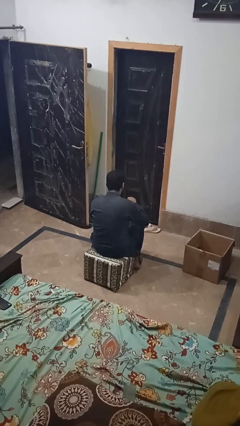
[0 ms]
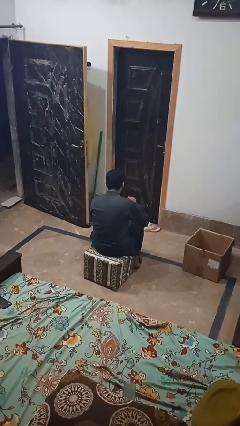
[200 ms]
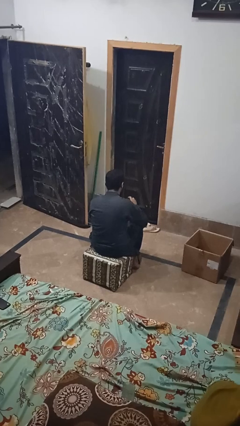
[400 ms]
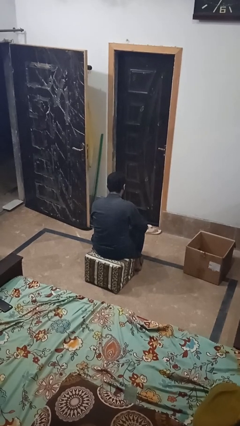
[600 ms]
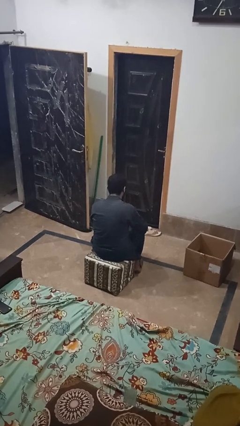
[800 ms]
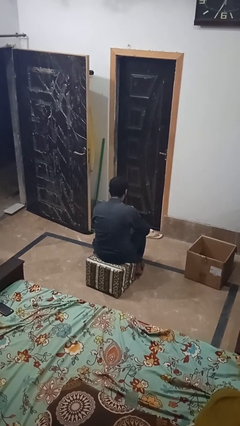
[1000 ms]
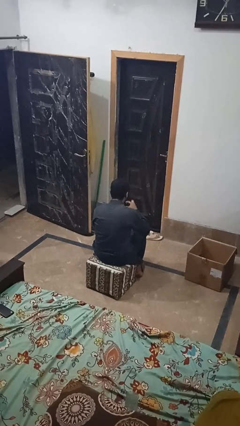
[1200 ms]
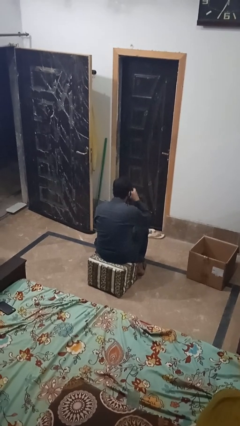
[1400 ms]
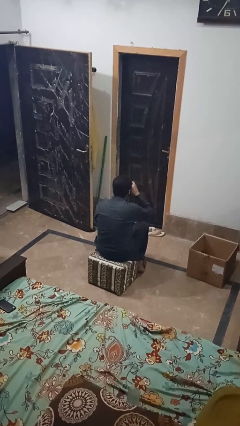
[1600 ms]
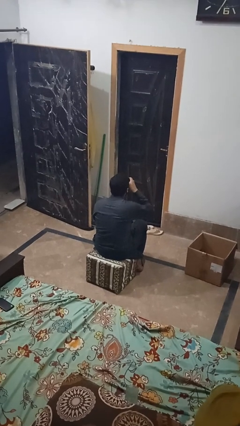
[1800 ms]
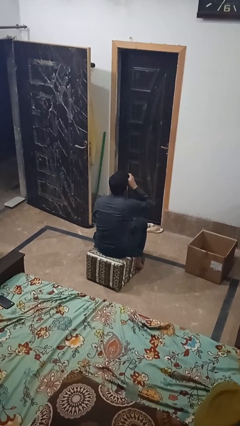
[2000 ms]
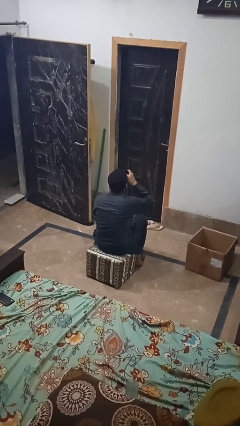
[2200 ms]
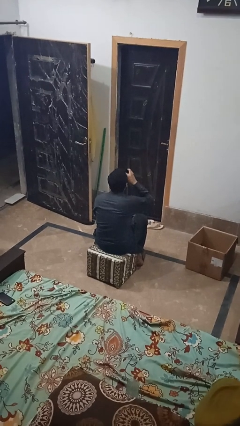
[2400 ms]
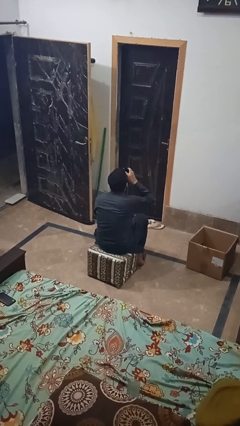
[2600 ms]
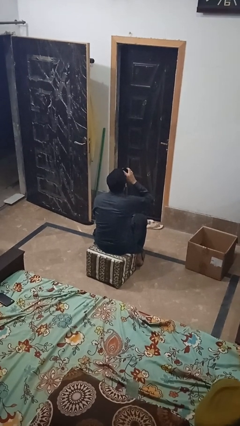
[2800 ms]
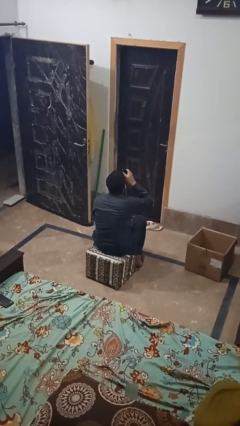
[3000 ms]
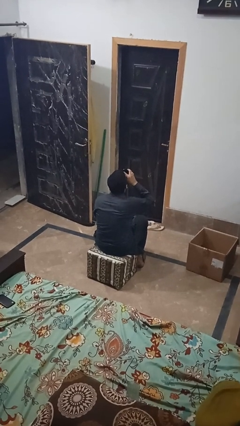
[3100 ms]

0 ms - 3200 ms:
person drinks from mug

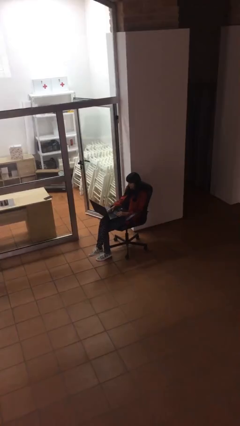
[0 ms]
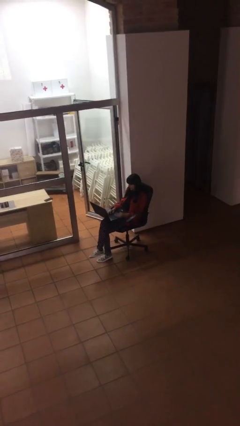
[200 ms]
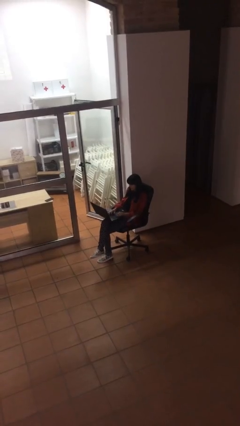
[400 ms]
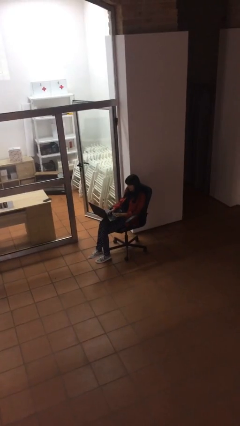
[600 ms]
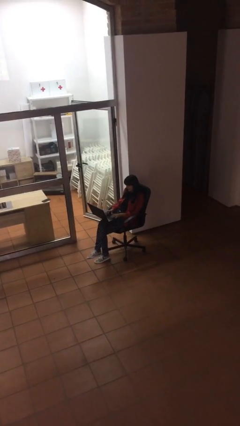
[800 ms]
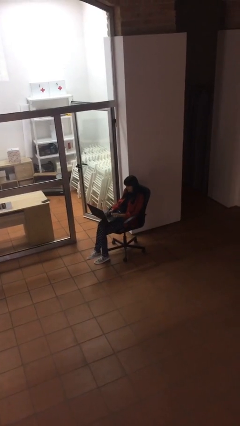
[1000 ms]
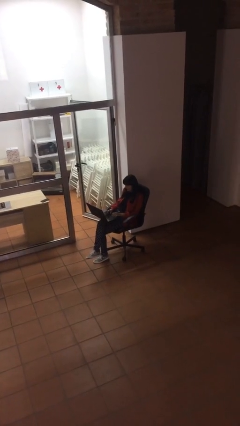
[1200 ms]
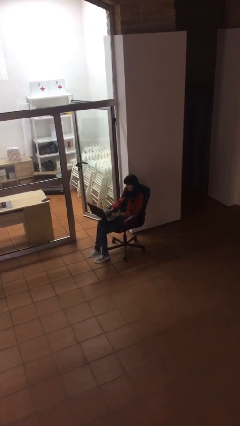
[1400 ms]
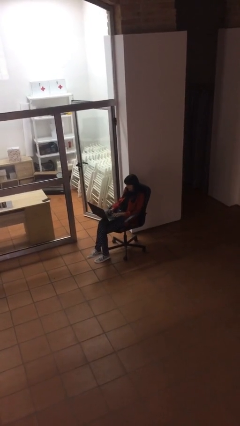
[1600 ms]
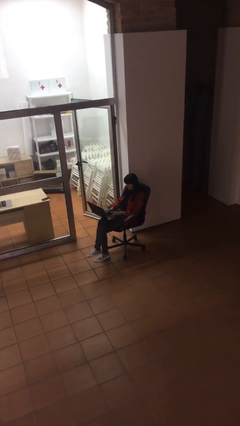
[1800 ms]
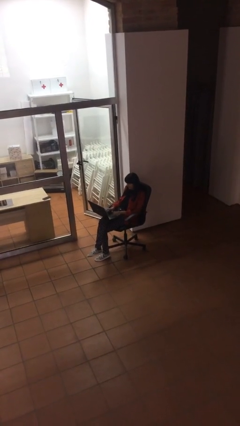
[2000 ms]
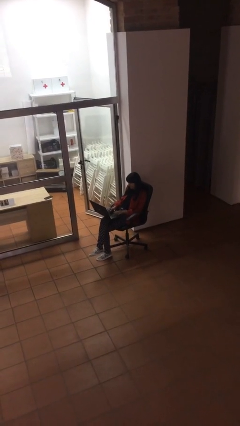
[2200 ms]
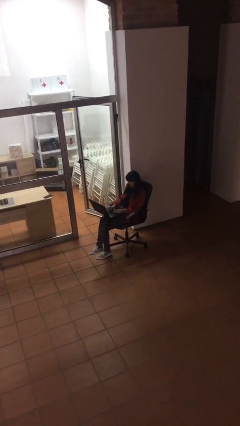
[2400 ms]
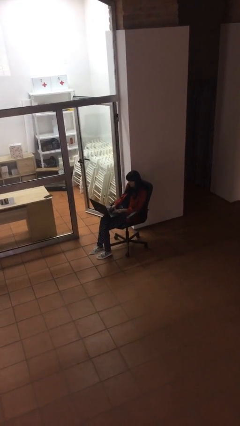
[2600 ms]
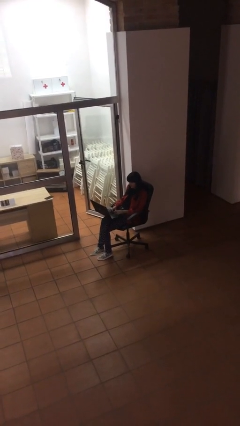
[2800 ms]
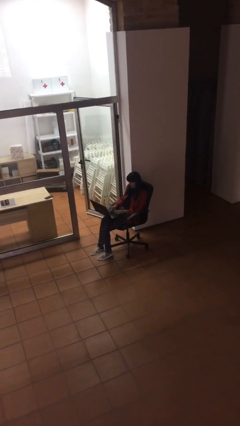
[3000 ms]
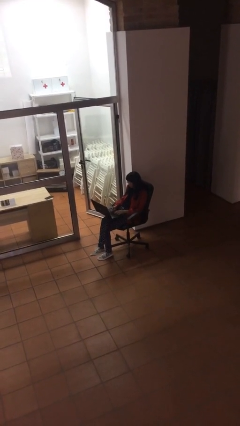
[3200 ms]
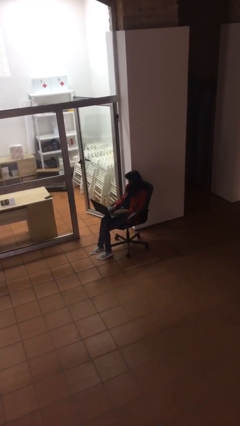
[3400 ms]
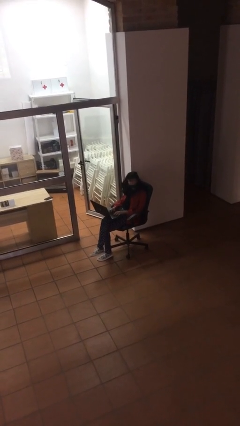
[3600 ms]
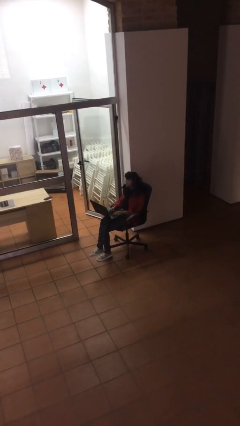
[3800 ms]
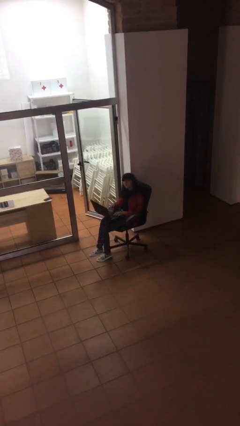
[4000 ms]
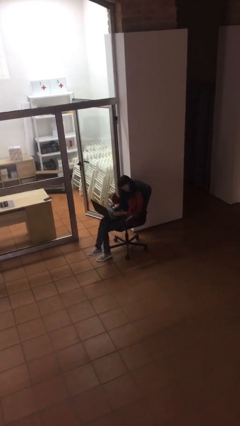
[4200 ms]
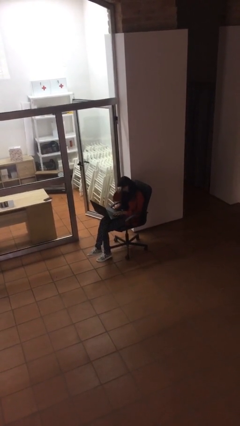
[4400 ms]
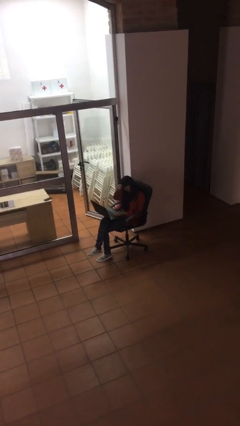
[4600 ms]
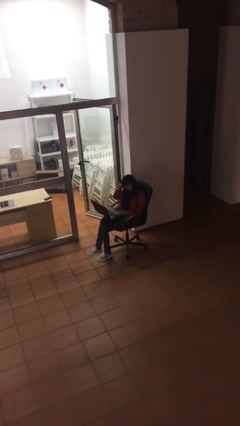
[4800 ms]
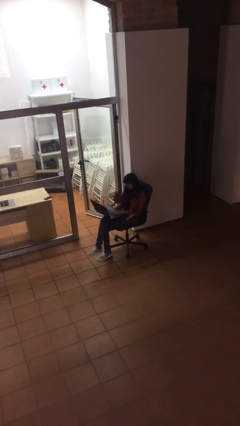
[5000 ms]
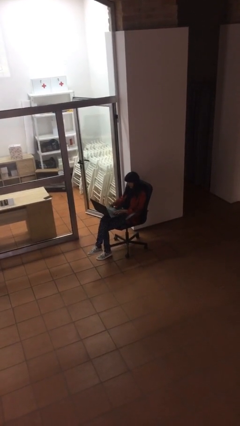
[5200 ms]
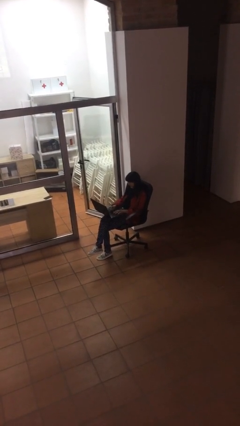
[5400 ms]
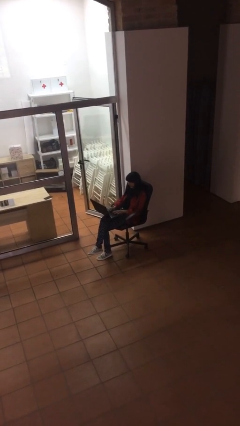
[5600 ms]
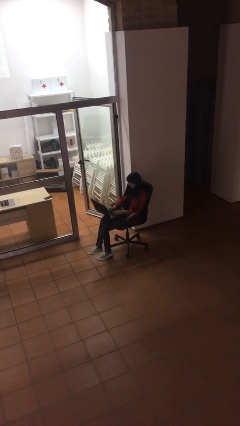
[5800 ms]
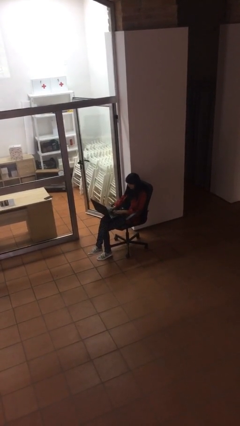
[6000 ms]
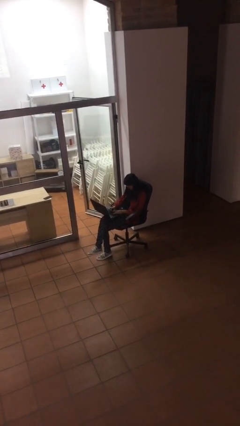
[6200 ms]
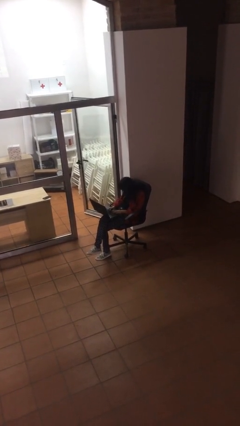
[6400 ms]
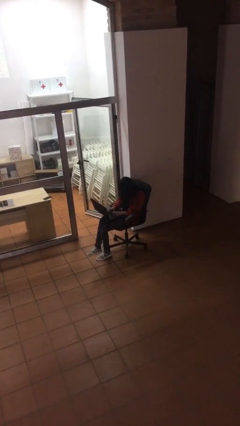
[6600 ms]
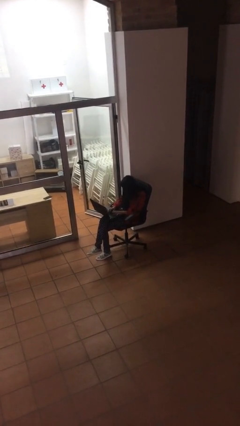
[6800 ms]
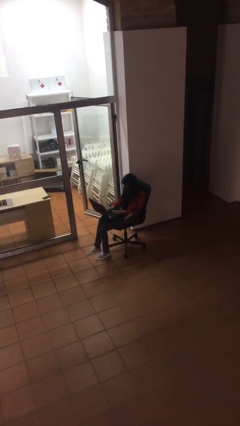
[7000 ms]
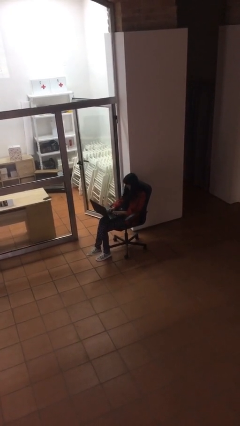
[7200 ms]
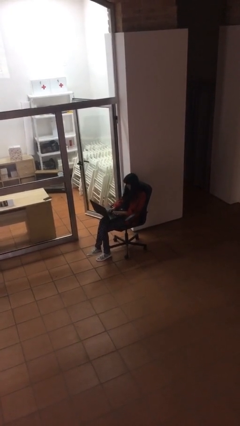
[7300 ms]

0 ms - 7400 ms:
person interacts with laptop

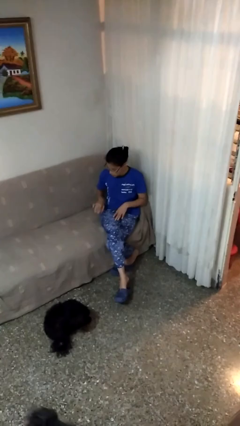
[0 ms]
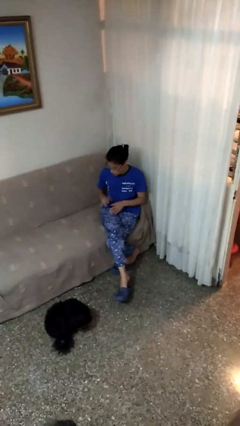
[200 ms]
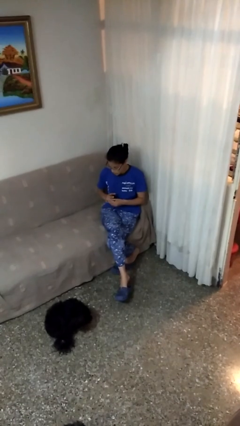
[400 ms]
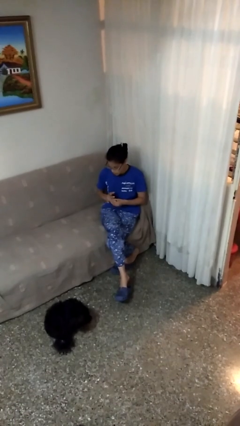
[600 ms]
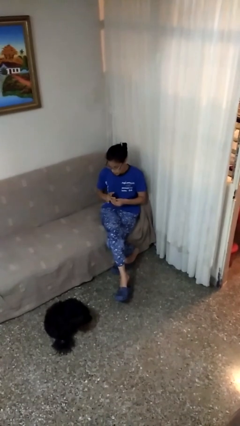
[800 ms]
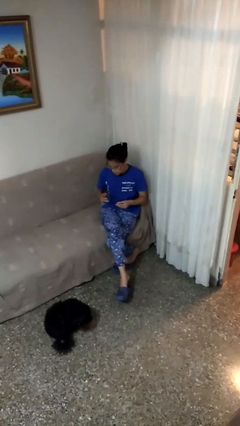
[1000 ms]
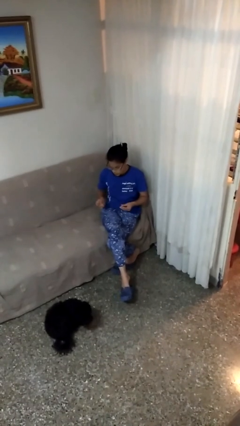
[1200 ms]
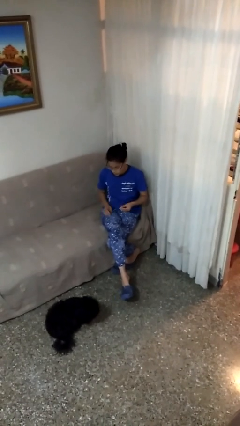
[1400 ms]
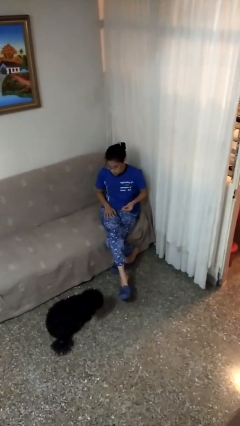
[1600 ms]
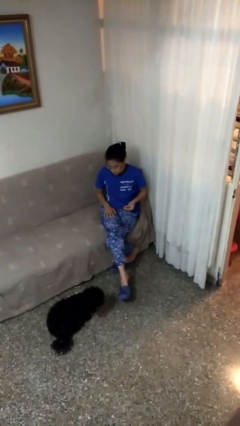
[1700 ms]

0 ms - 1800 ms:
person takes off ring

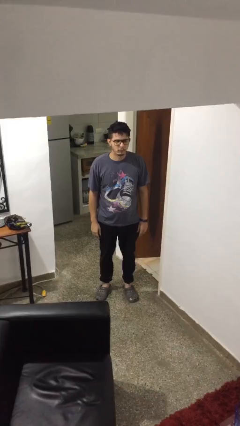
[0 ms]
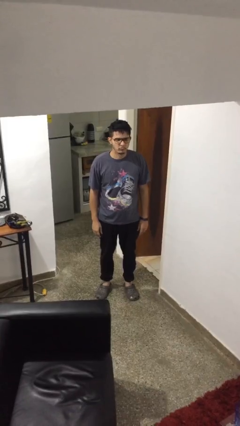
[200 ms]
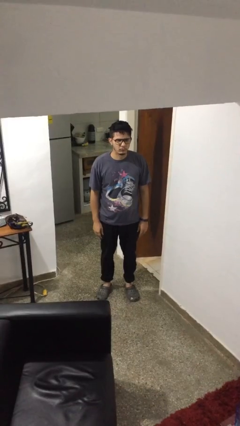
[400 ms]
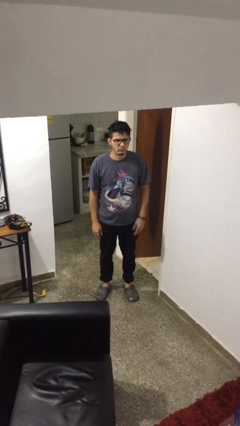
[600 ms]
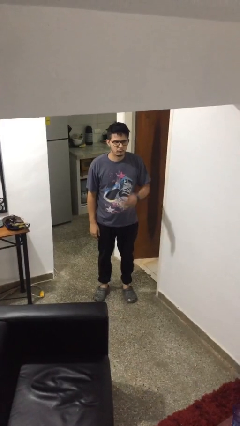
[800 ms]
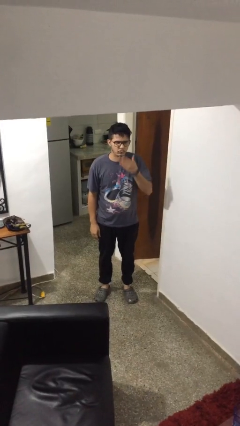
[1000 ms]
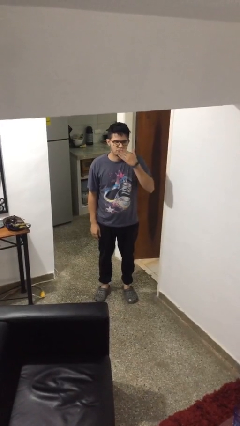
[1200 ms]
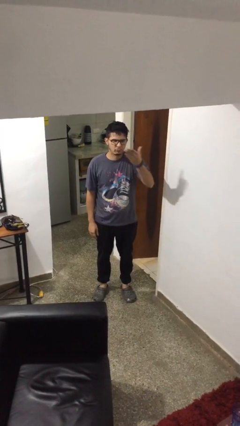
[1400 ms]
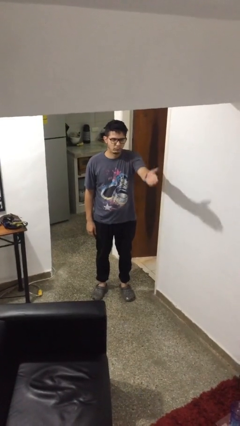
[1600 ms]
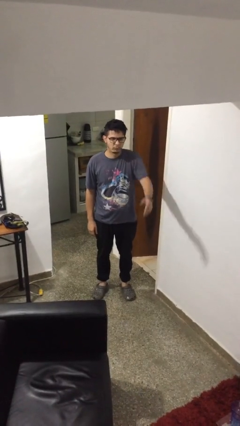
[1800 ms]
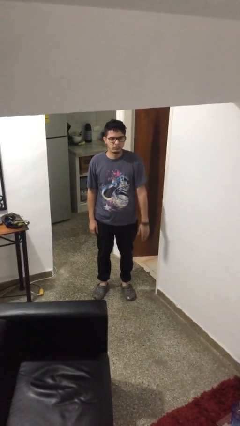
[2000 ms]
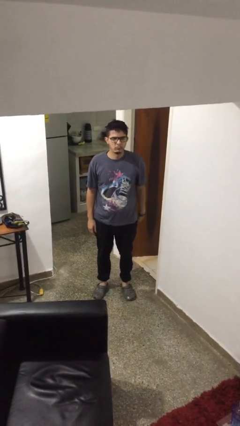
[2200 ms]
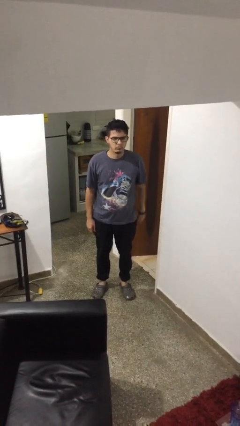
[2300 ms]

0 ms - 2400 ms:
person gestures blow kiss

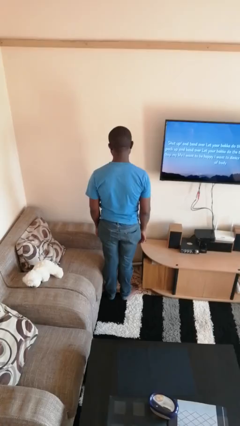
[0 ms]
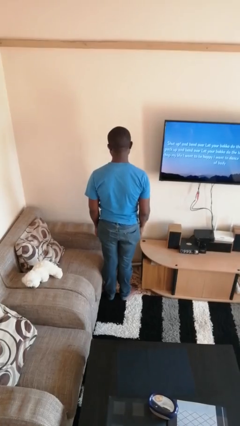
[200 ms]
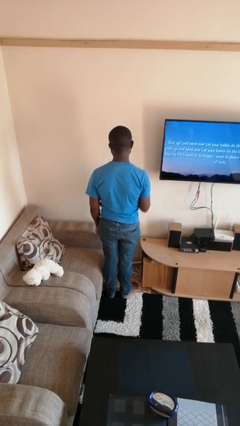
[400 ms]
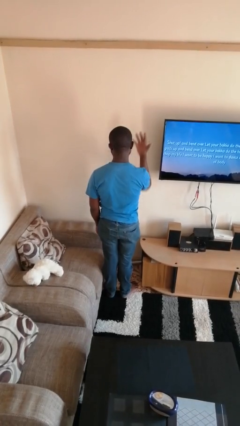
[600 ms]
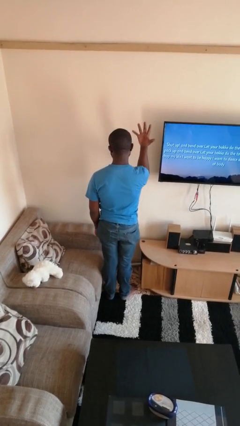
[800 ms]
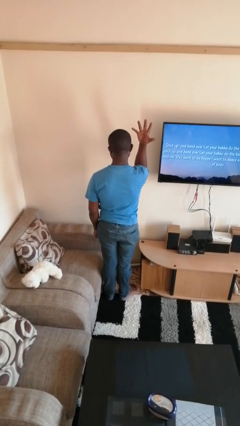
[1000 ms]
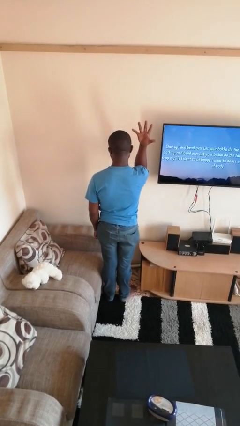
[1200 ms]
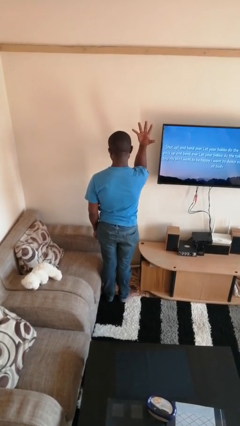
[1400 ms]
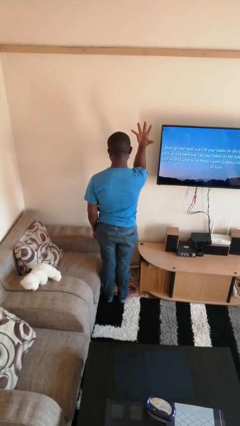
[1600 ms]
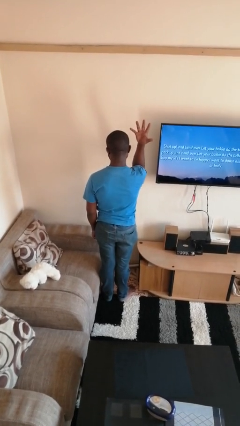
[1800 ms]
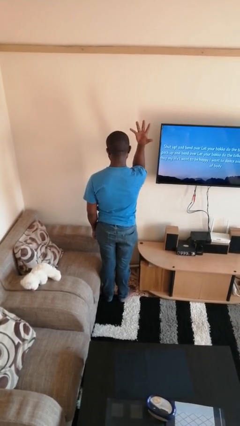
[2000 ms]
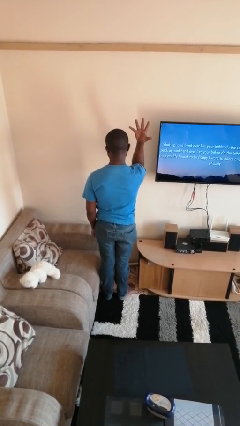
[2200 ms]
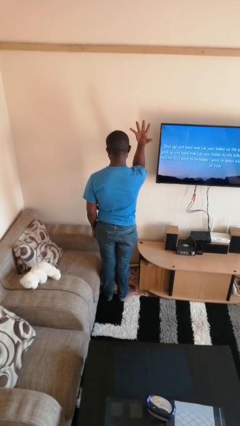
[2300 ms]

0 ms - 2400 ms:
person gestures number five

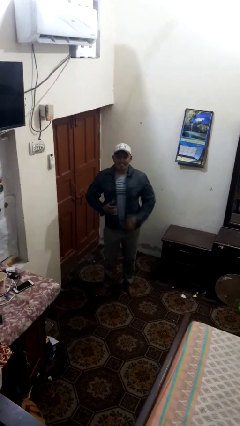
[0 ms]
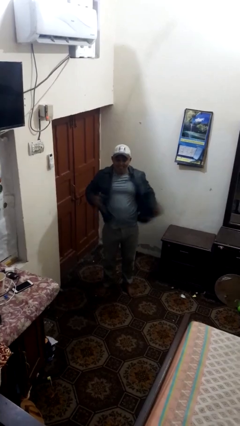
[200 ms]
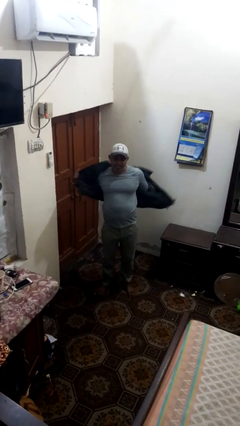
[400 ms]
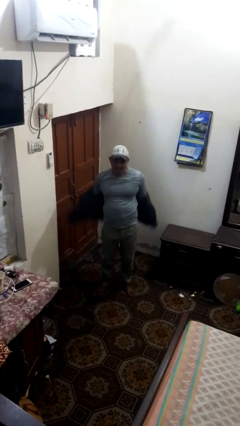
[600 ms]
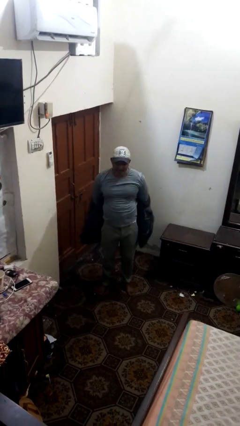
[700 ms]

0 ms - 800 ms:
person unzips jacket
